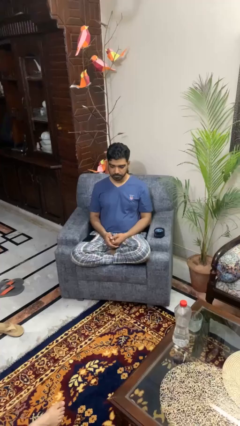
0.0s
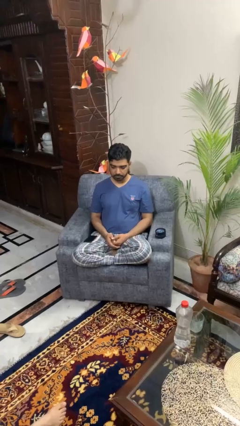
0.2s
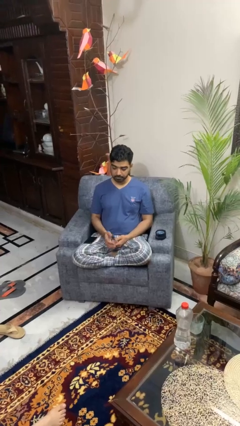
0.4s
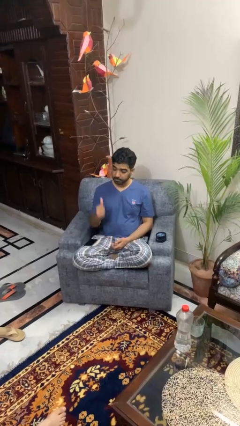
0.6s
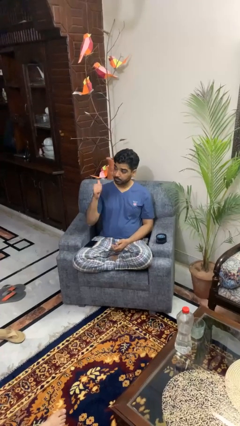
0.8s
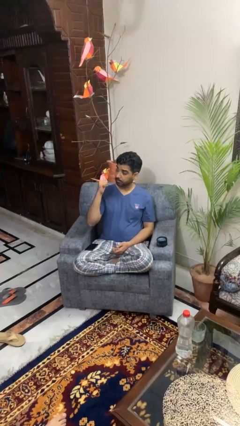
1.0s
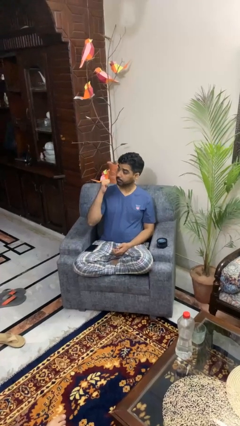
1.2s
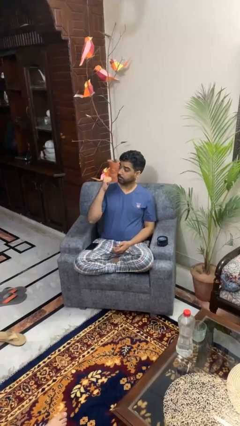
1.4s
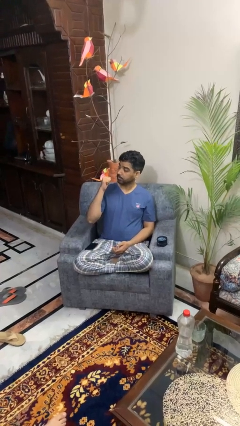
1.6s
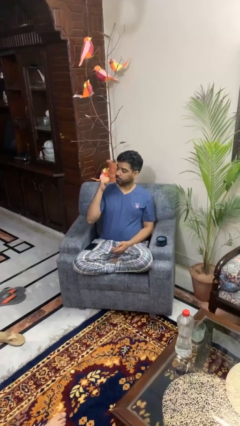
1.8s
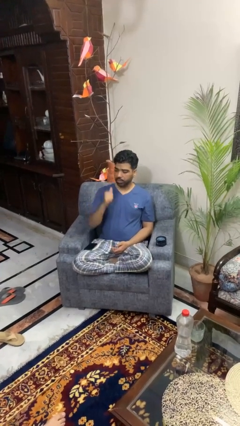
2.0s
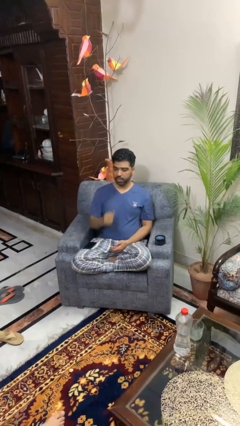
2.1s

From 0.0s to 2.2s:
person gestures behind me

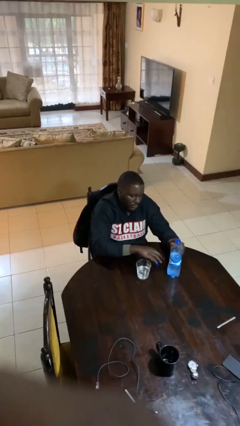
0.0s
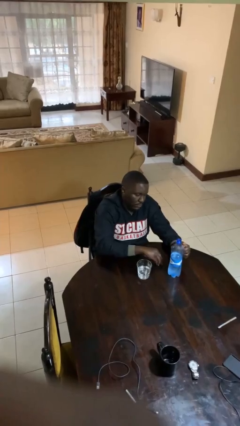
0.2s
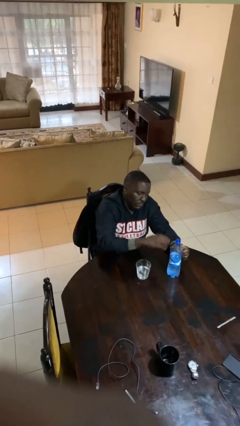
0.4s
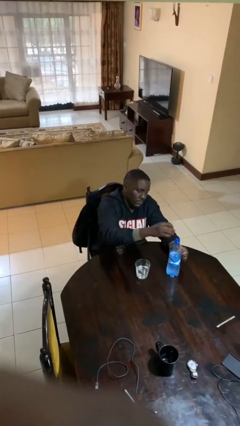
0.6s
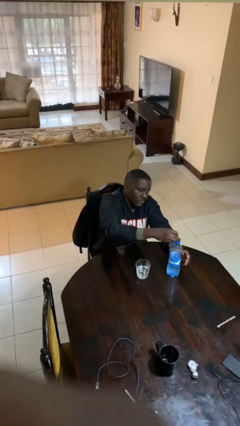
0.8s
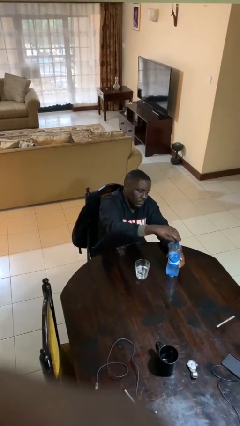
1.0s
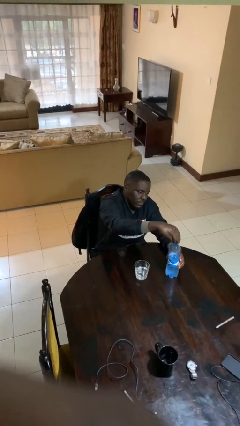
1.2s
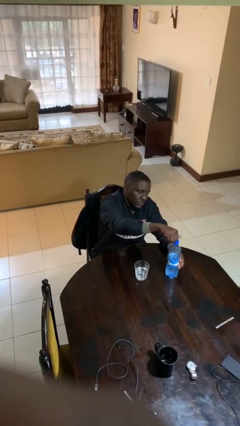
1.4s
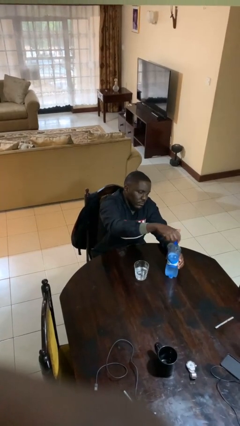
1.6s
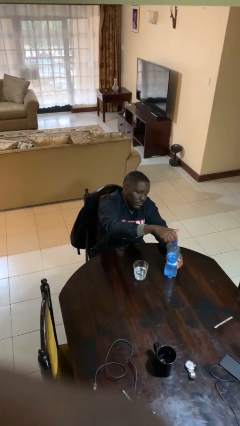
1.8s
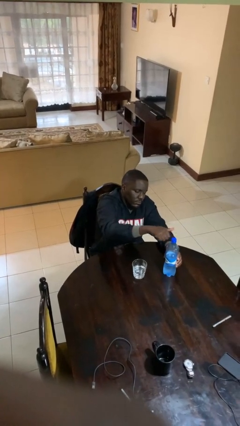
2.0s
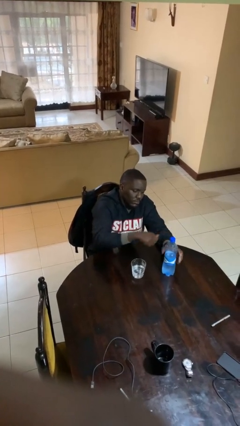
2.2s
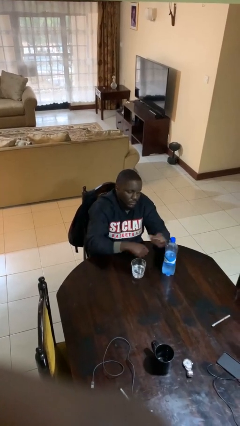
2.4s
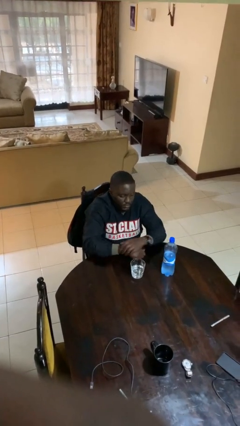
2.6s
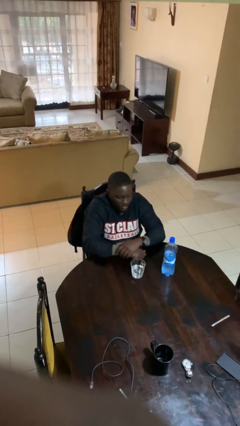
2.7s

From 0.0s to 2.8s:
person screws lid to bottle

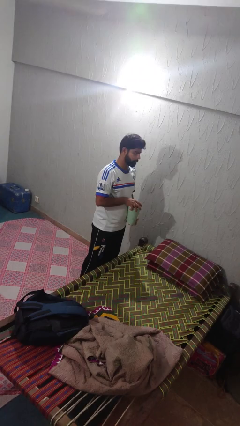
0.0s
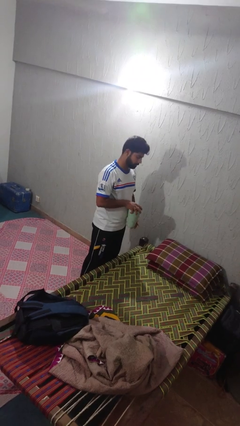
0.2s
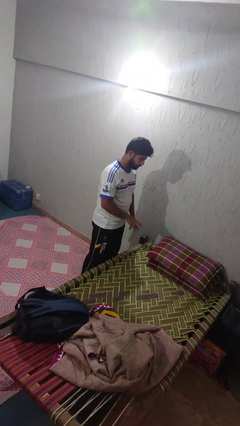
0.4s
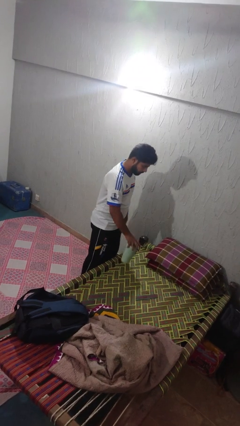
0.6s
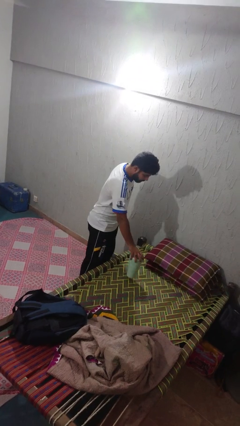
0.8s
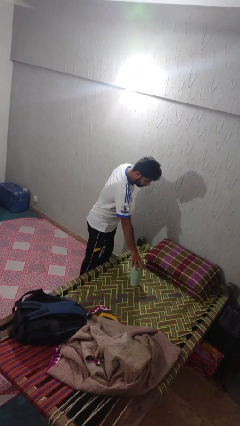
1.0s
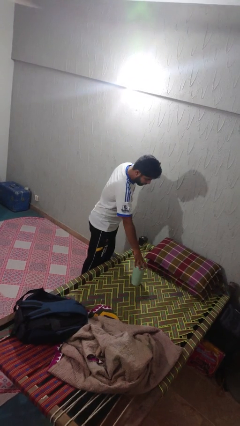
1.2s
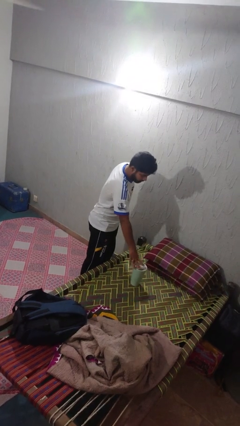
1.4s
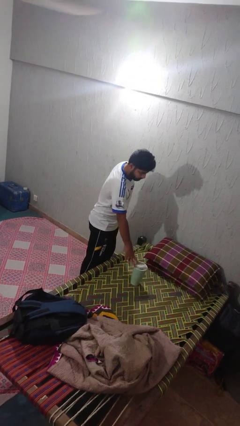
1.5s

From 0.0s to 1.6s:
person puts down object on bed

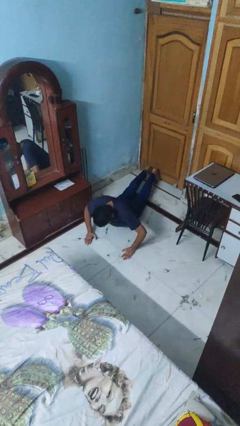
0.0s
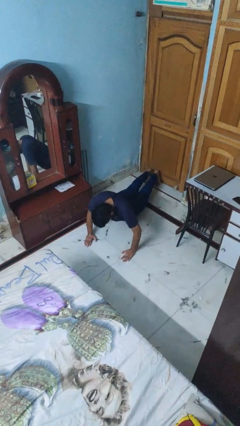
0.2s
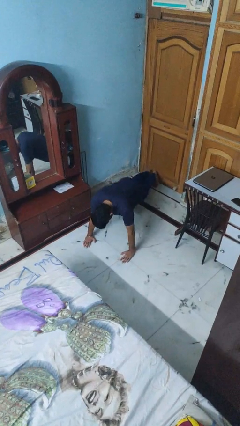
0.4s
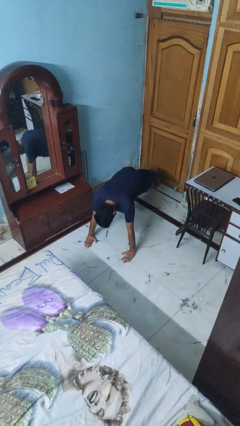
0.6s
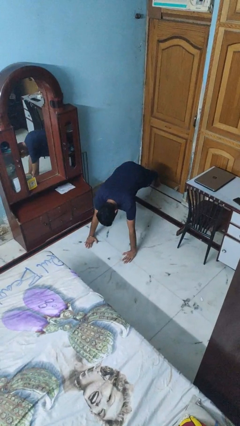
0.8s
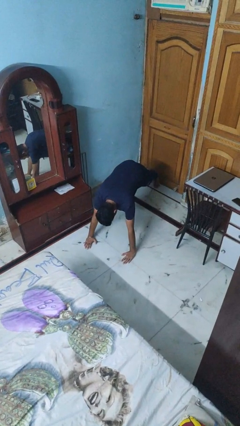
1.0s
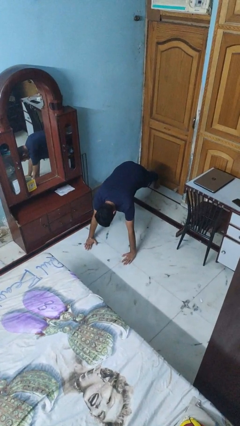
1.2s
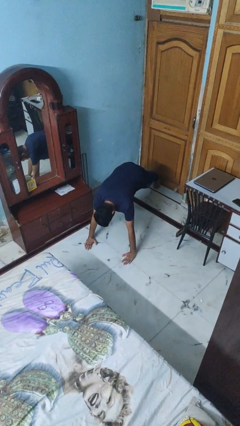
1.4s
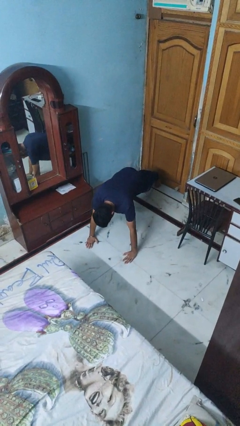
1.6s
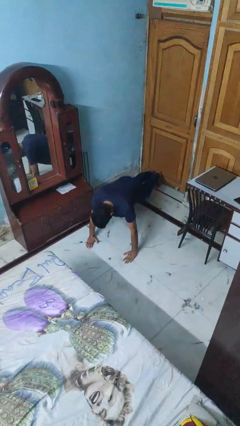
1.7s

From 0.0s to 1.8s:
person exercises with pushup

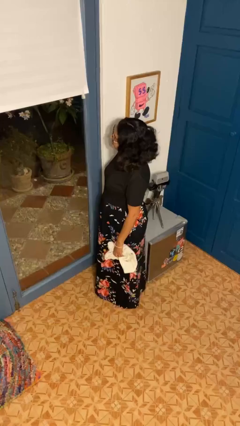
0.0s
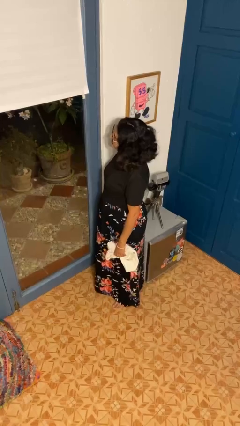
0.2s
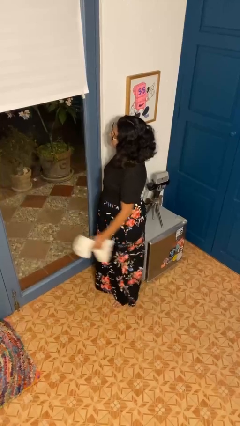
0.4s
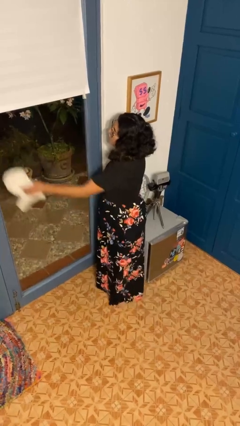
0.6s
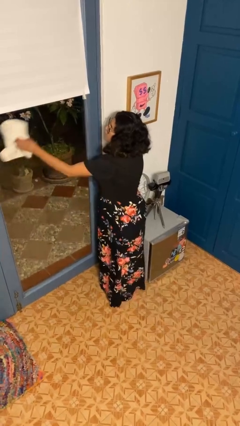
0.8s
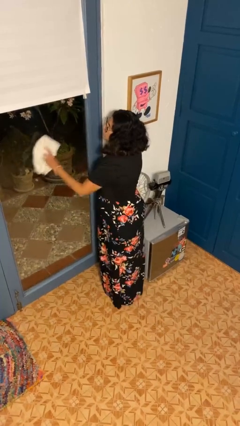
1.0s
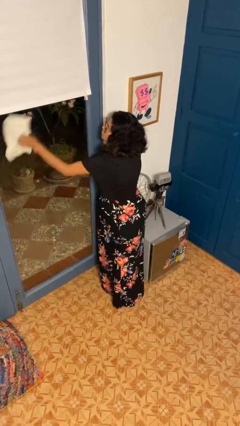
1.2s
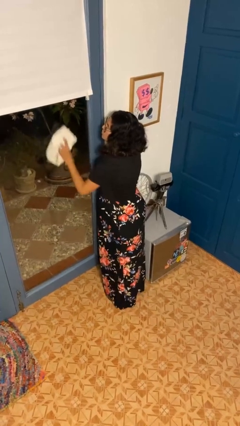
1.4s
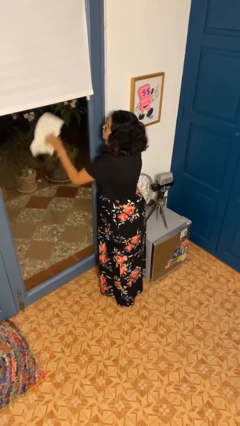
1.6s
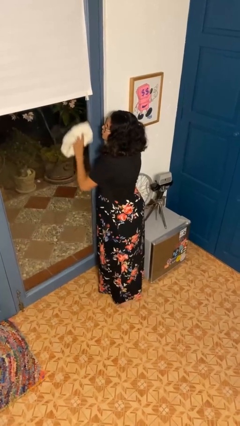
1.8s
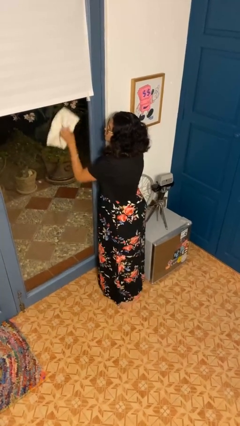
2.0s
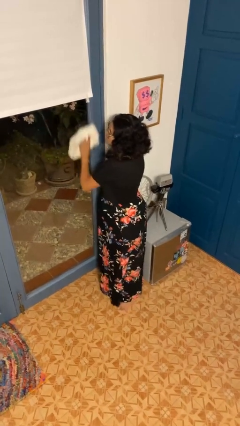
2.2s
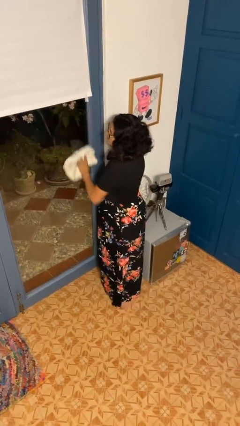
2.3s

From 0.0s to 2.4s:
person washes window

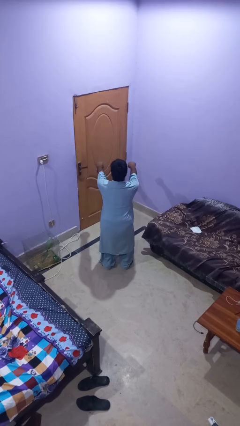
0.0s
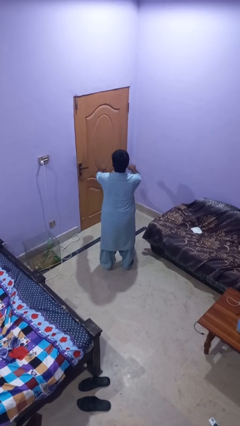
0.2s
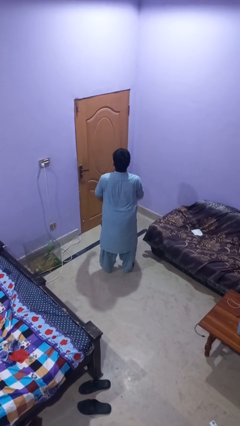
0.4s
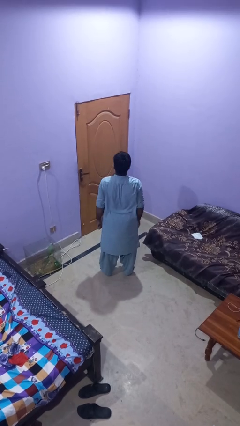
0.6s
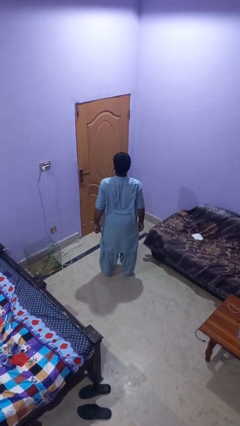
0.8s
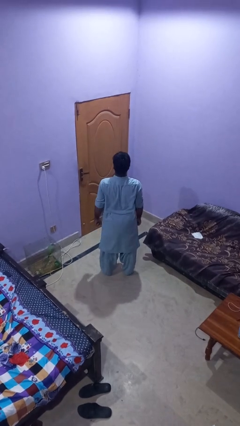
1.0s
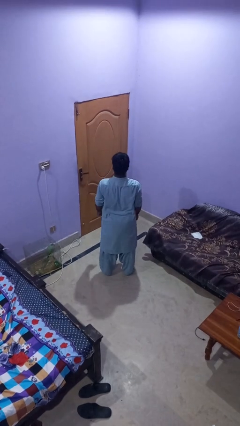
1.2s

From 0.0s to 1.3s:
person stands up

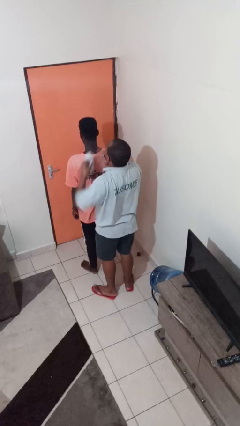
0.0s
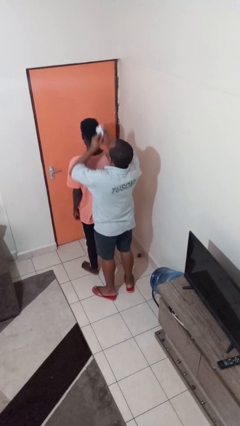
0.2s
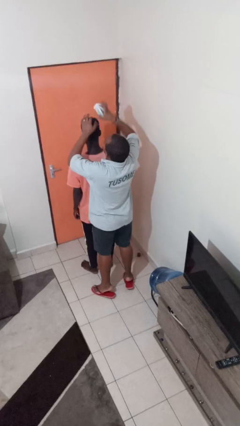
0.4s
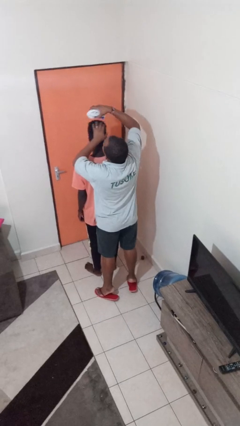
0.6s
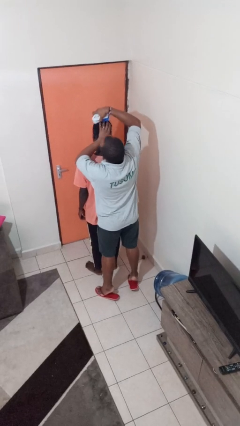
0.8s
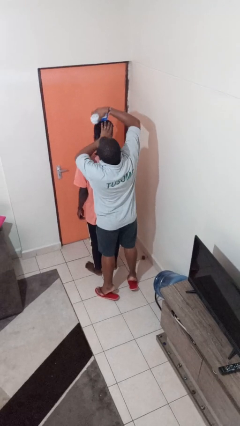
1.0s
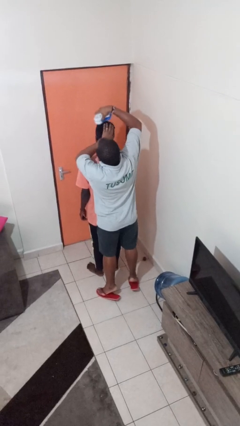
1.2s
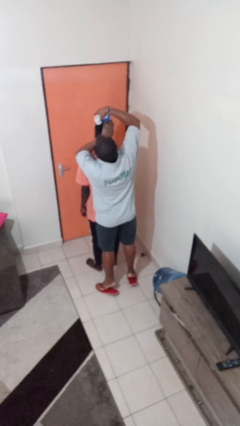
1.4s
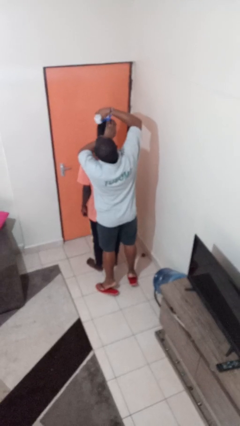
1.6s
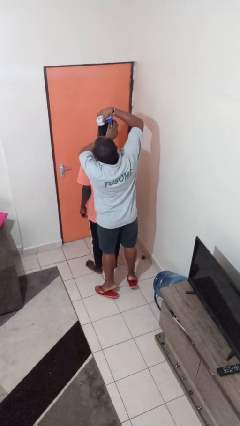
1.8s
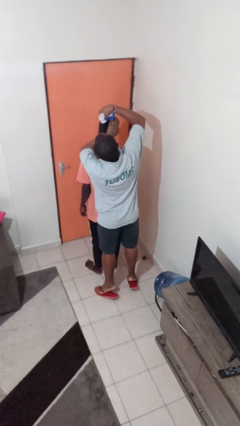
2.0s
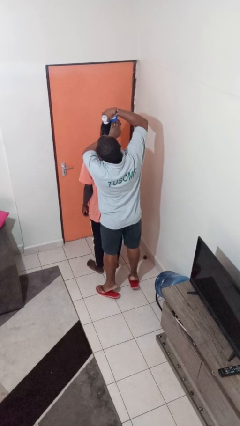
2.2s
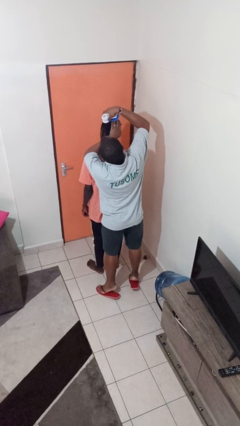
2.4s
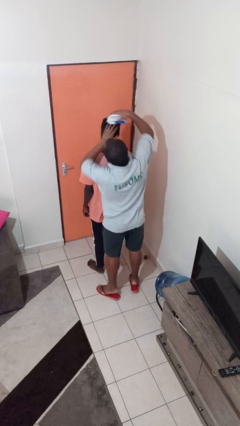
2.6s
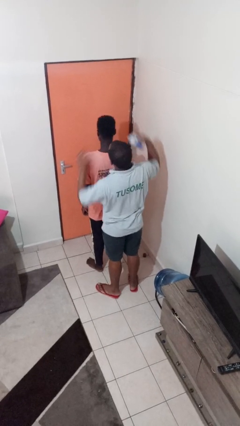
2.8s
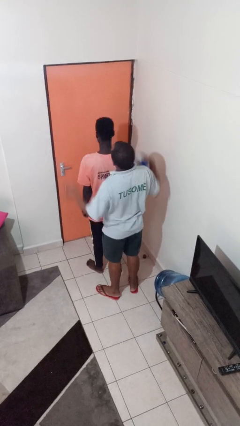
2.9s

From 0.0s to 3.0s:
person brushes hair of person

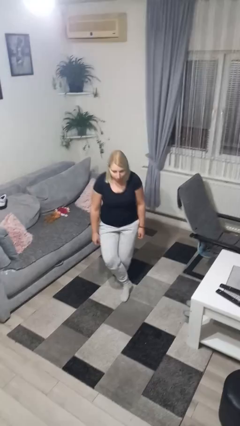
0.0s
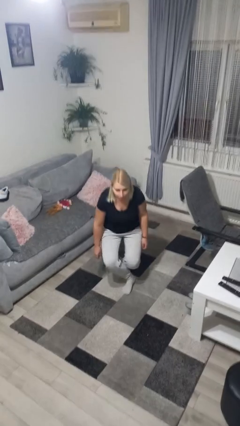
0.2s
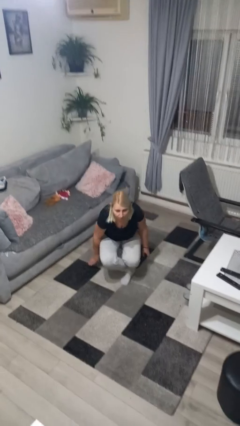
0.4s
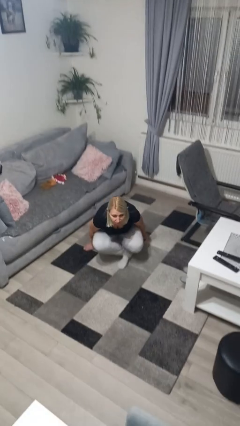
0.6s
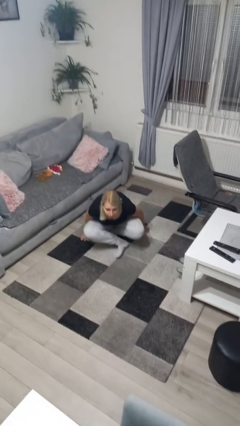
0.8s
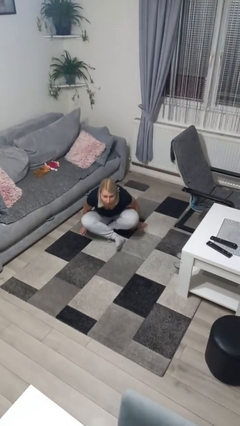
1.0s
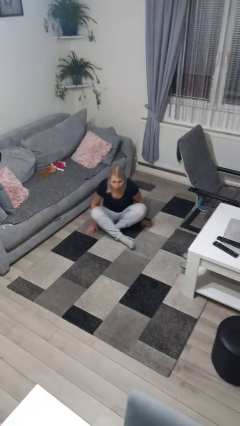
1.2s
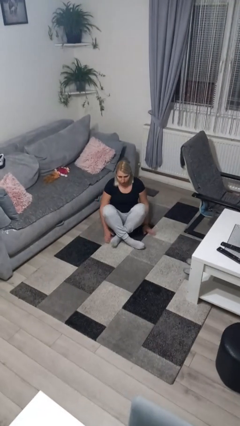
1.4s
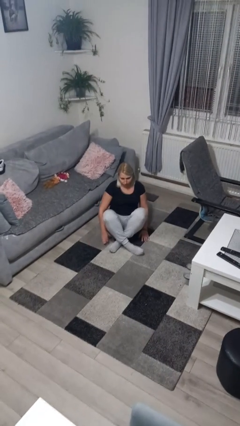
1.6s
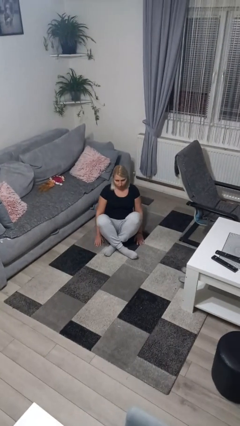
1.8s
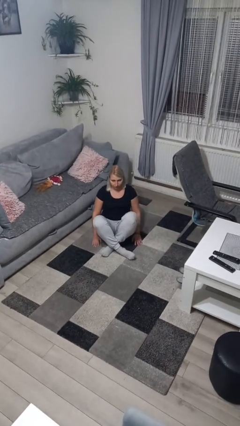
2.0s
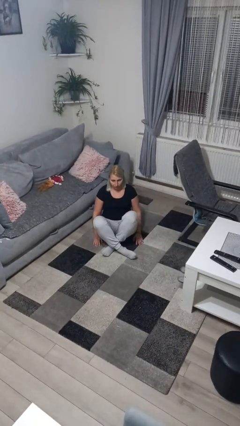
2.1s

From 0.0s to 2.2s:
person sits crisscross
